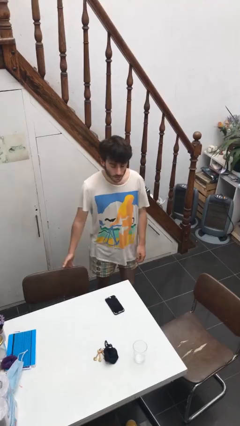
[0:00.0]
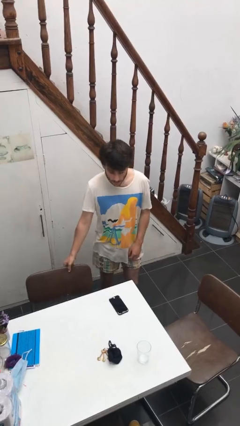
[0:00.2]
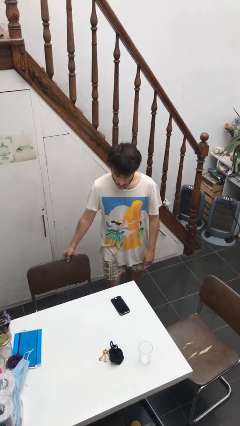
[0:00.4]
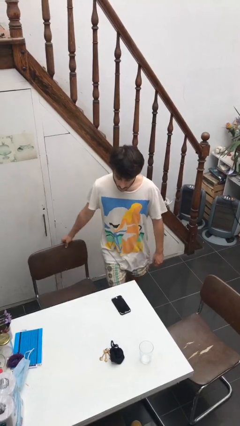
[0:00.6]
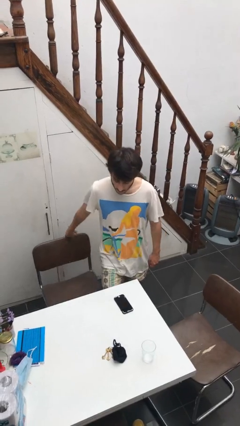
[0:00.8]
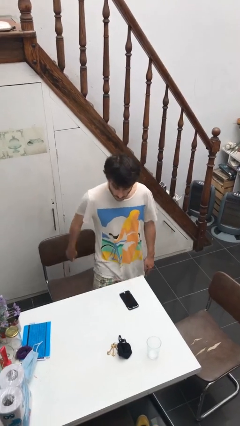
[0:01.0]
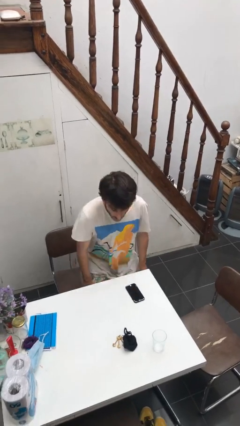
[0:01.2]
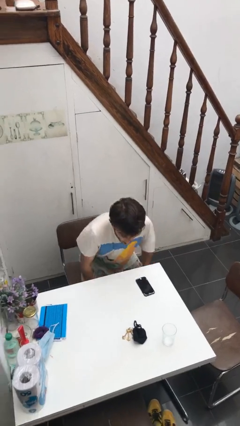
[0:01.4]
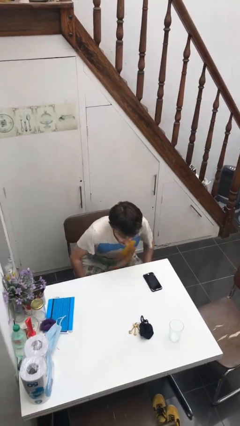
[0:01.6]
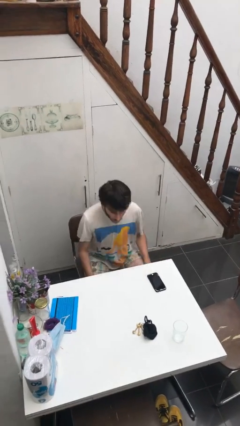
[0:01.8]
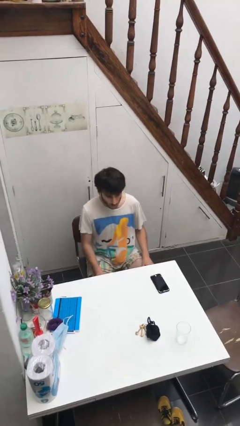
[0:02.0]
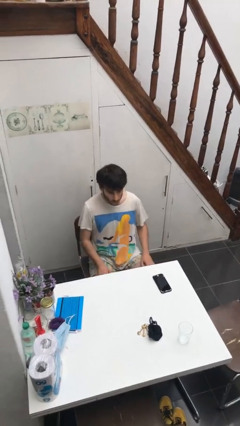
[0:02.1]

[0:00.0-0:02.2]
person sits down

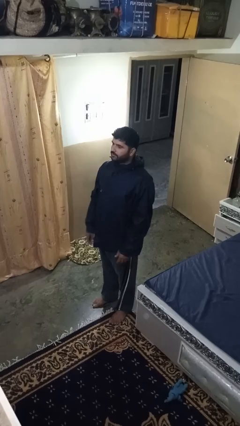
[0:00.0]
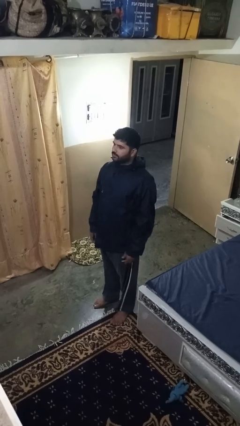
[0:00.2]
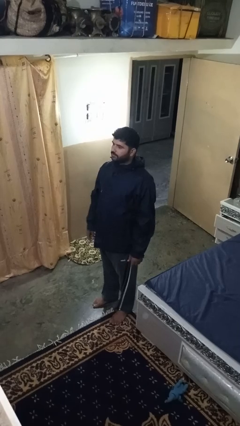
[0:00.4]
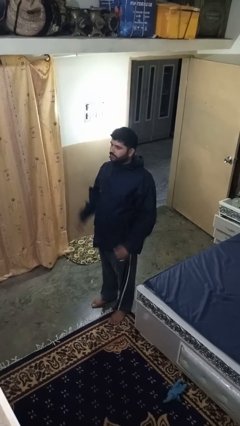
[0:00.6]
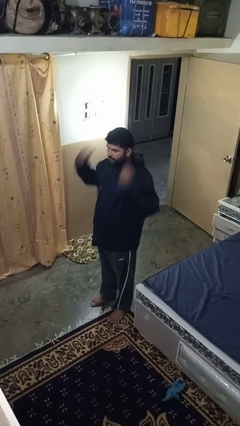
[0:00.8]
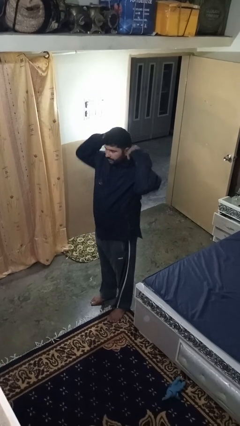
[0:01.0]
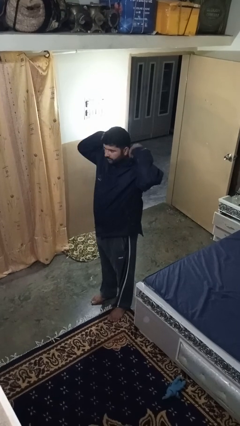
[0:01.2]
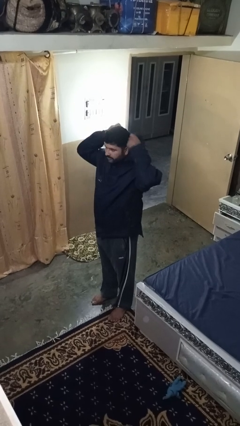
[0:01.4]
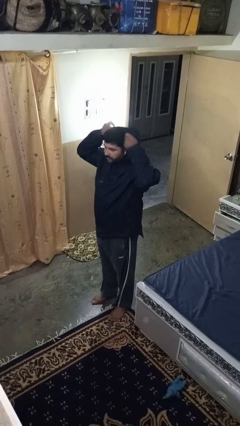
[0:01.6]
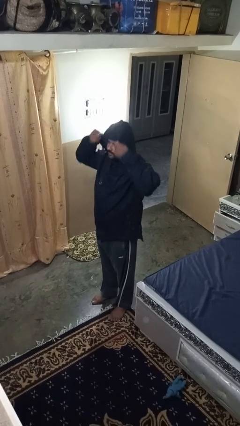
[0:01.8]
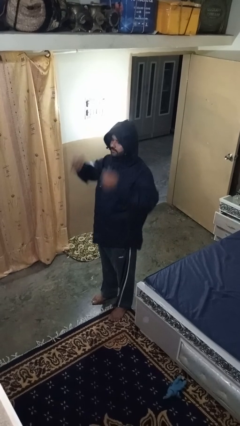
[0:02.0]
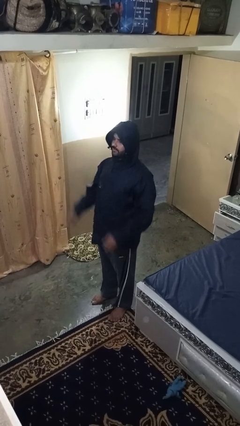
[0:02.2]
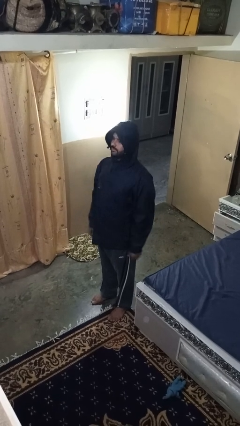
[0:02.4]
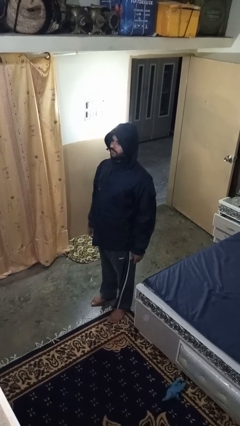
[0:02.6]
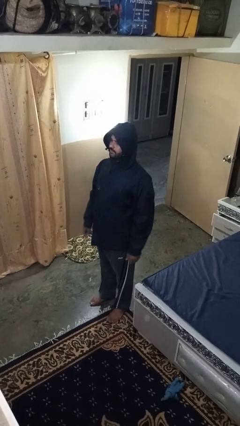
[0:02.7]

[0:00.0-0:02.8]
person puts on hoodie

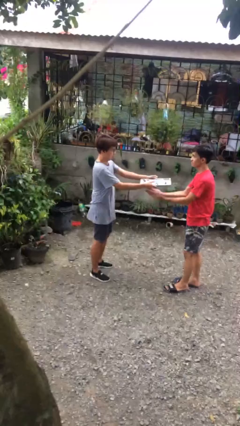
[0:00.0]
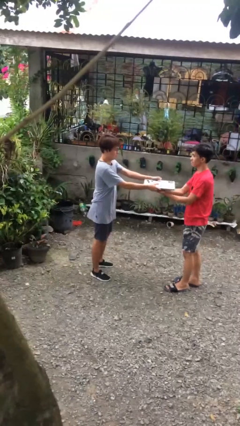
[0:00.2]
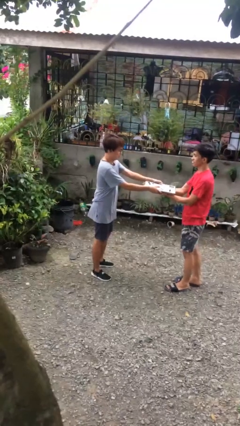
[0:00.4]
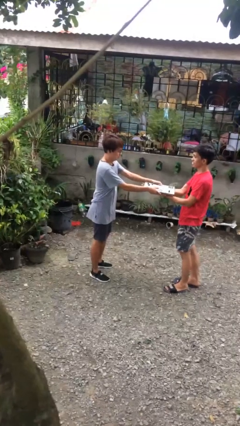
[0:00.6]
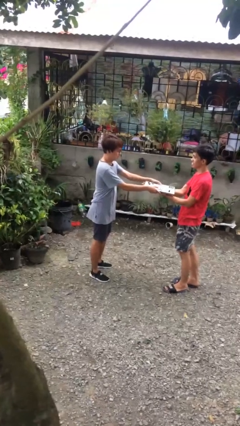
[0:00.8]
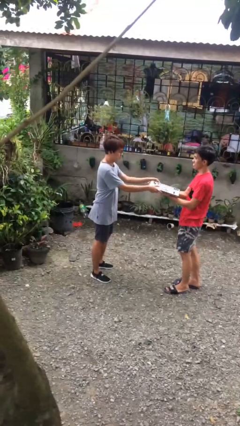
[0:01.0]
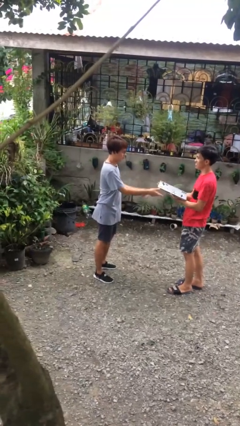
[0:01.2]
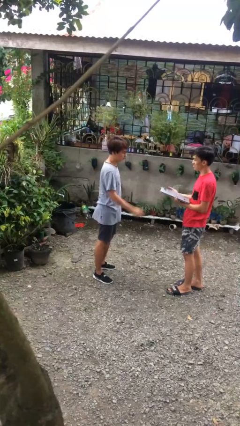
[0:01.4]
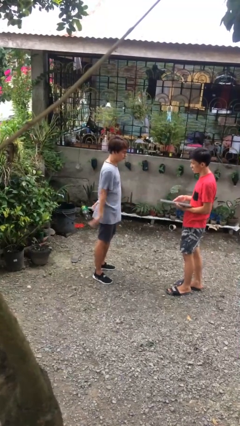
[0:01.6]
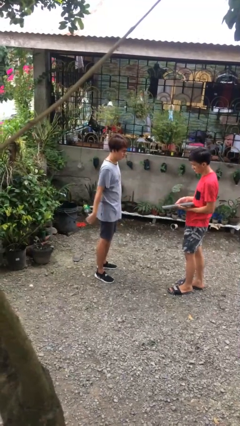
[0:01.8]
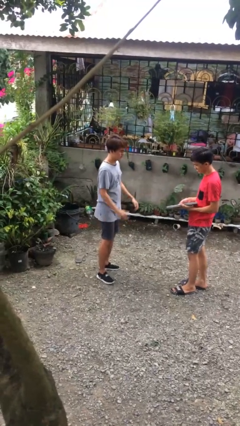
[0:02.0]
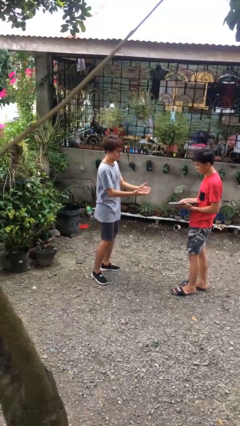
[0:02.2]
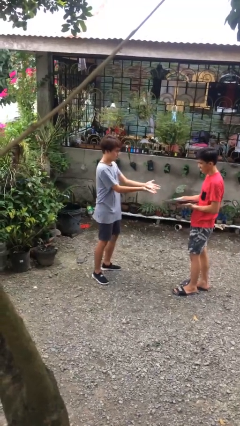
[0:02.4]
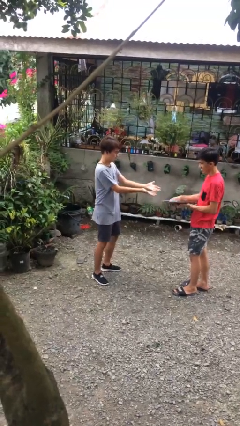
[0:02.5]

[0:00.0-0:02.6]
person transfers object to person

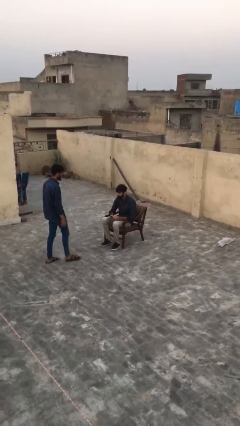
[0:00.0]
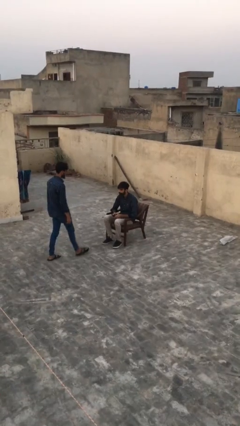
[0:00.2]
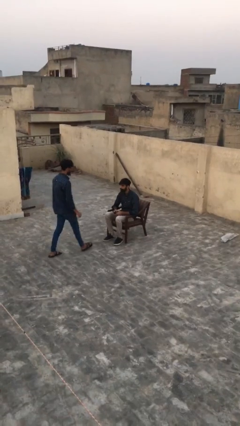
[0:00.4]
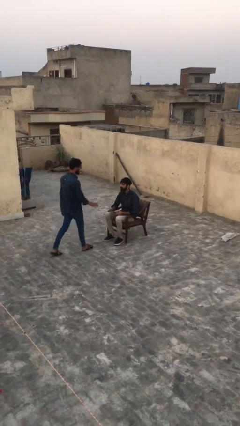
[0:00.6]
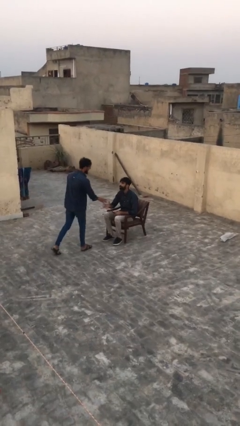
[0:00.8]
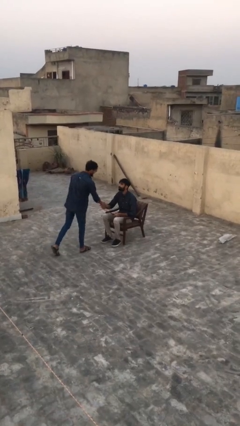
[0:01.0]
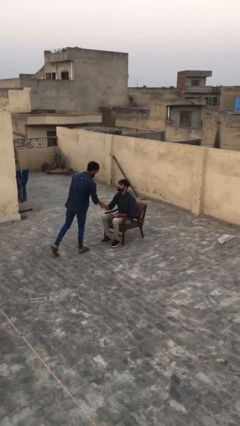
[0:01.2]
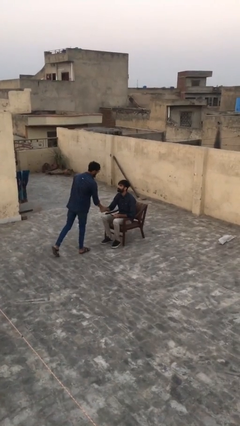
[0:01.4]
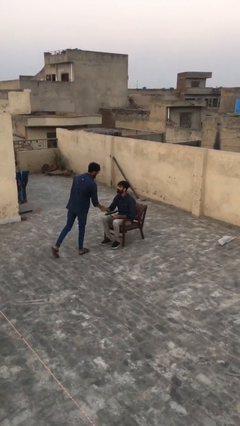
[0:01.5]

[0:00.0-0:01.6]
person shakes hand

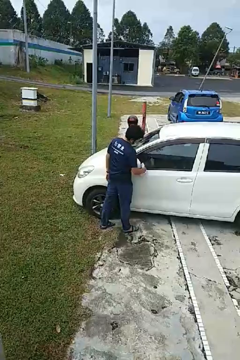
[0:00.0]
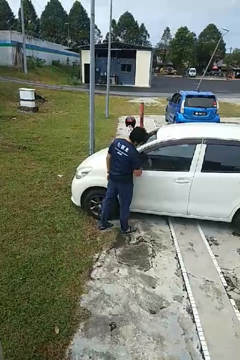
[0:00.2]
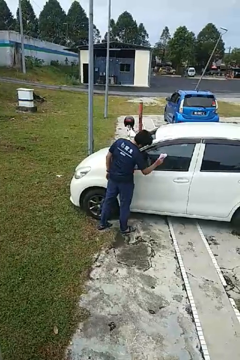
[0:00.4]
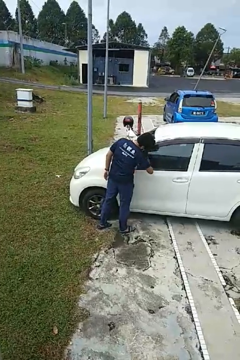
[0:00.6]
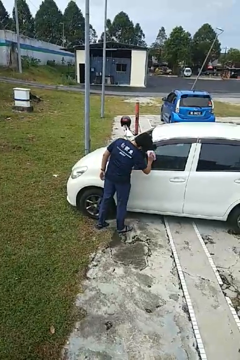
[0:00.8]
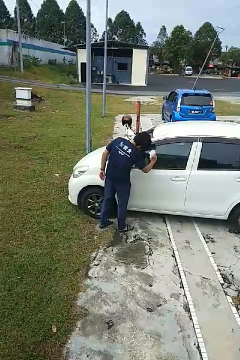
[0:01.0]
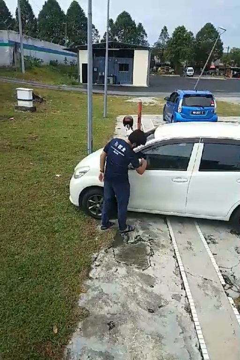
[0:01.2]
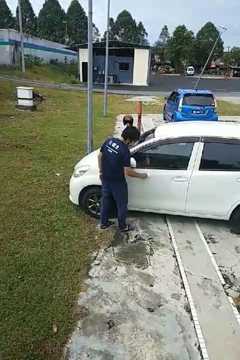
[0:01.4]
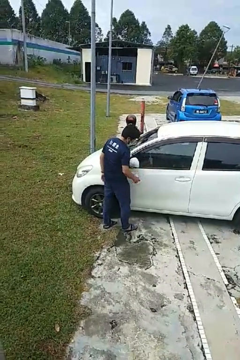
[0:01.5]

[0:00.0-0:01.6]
person polishes car with rag

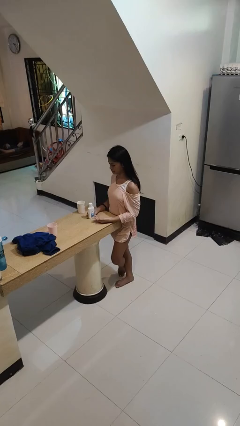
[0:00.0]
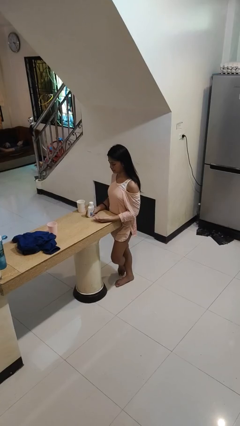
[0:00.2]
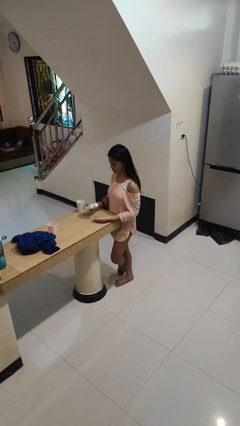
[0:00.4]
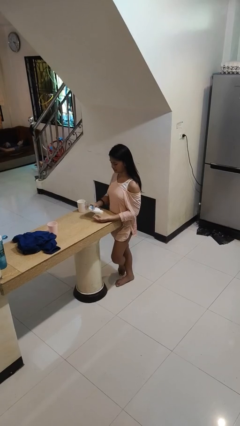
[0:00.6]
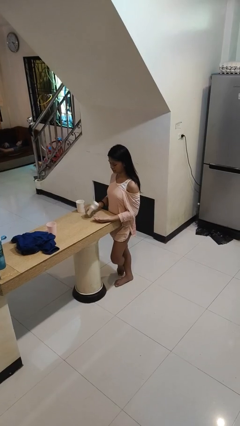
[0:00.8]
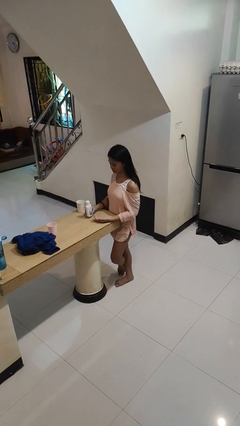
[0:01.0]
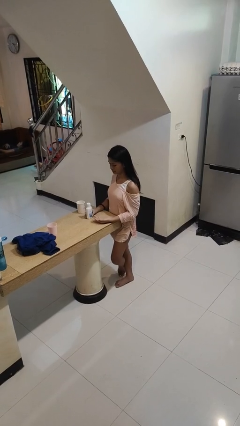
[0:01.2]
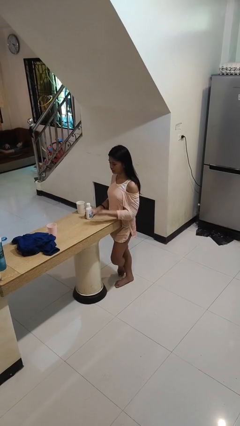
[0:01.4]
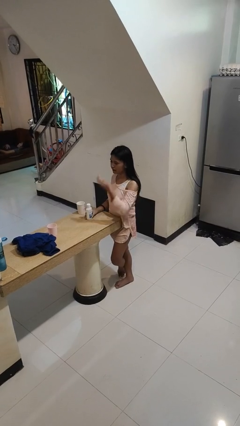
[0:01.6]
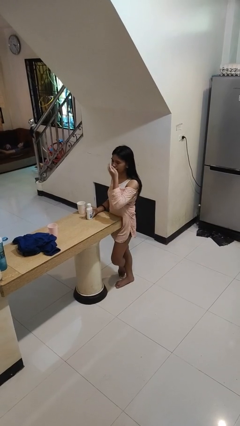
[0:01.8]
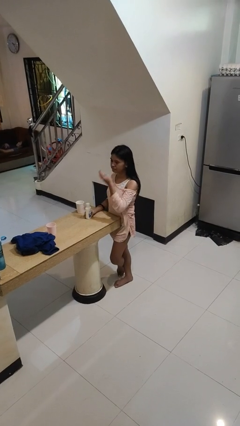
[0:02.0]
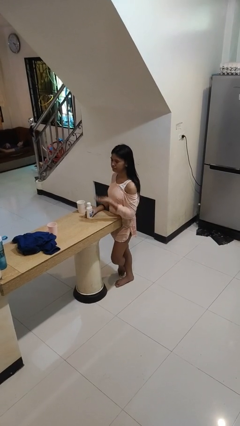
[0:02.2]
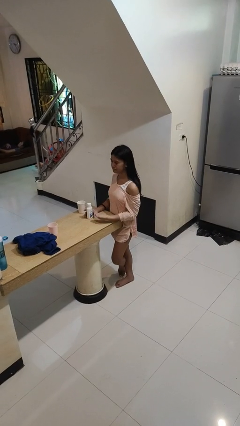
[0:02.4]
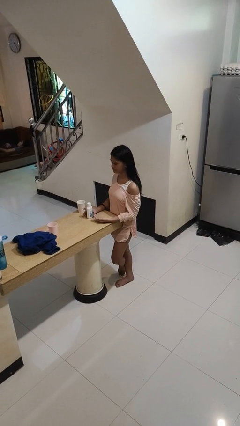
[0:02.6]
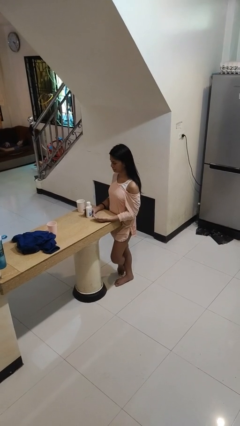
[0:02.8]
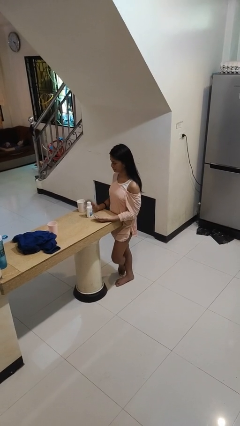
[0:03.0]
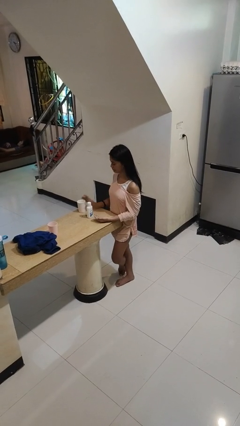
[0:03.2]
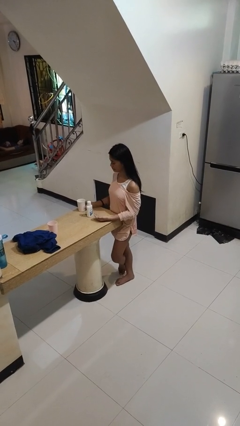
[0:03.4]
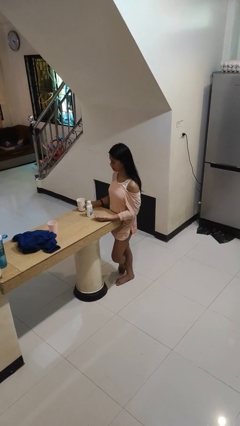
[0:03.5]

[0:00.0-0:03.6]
person takes medicine pills

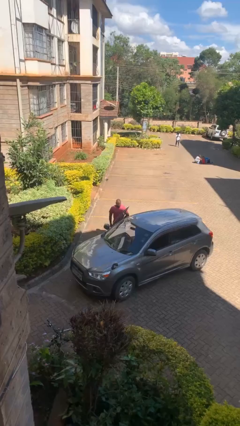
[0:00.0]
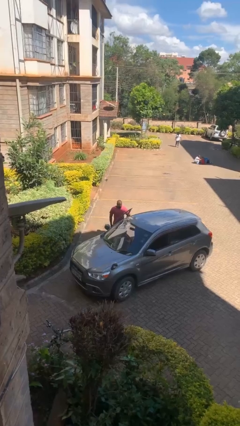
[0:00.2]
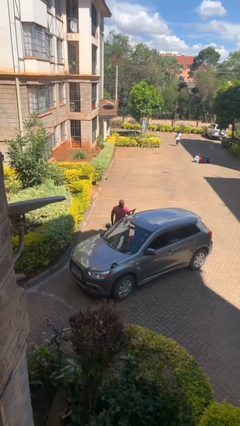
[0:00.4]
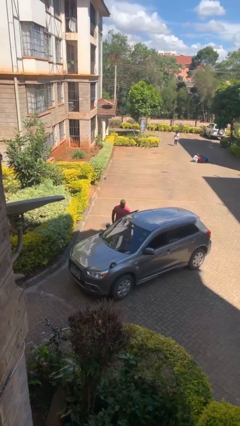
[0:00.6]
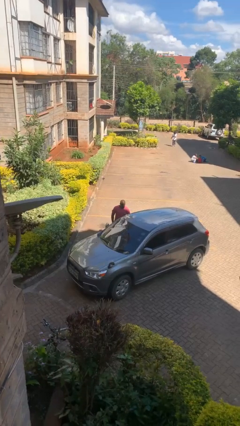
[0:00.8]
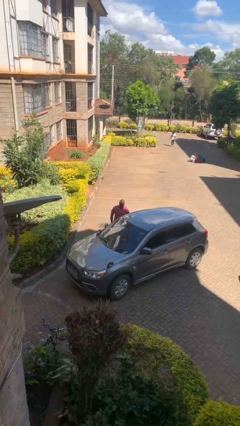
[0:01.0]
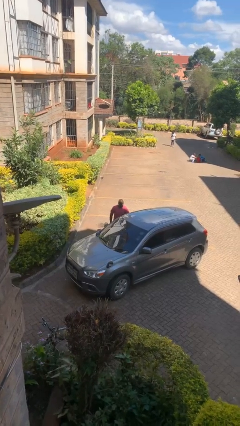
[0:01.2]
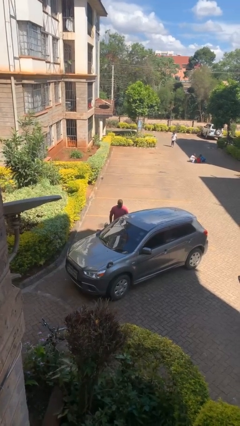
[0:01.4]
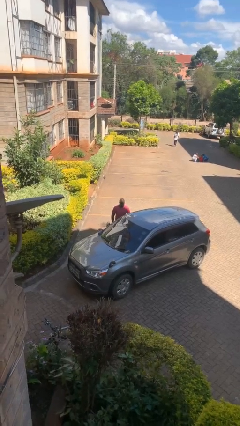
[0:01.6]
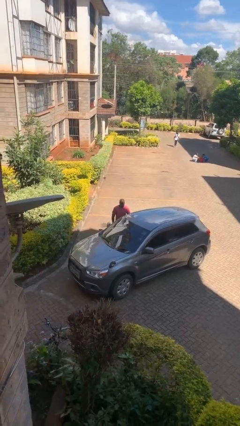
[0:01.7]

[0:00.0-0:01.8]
person closes car door

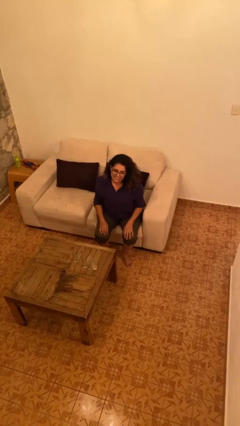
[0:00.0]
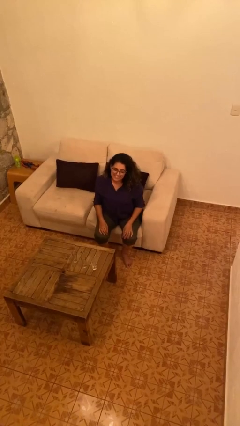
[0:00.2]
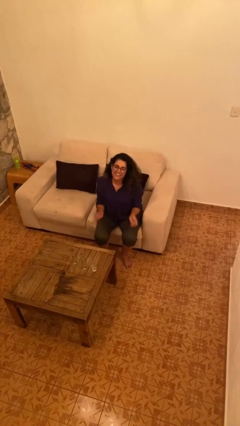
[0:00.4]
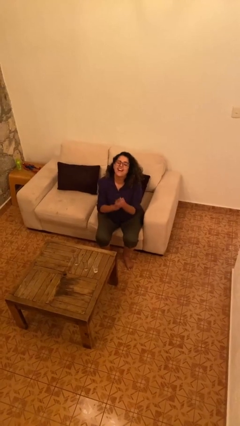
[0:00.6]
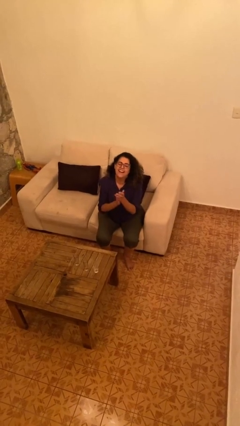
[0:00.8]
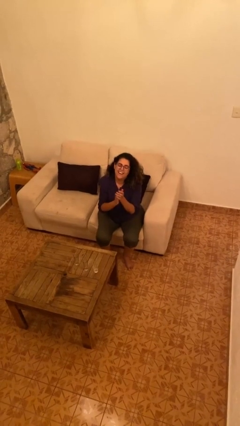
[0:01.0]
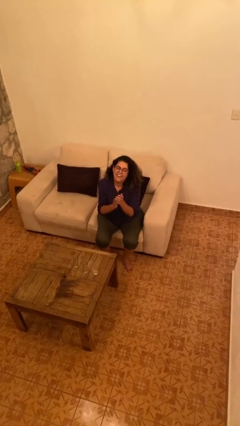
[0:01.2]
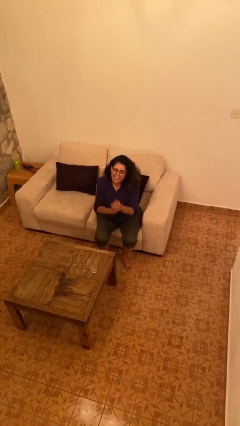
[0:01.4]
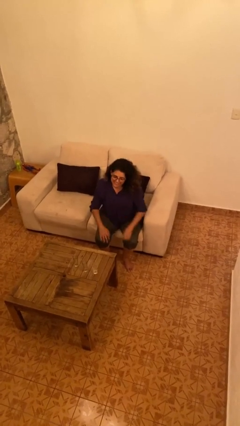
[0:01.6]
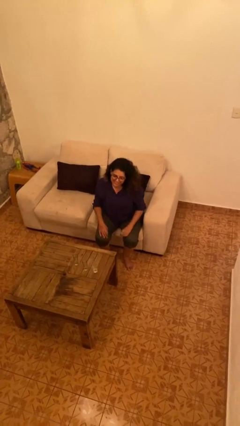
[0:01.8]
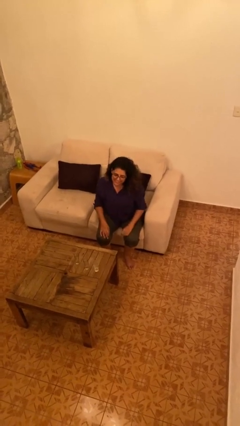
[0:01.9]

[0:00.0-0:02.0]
person claps hands
